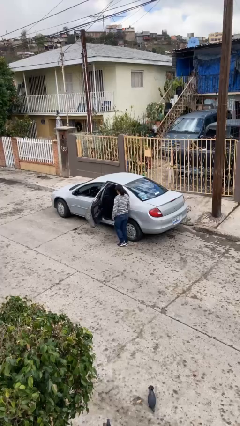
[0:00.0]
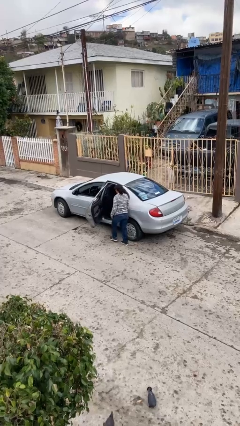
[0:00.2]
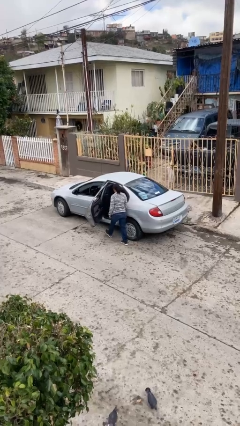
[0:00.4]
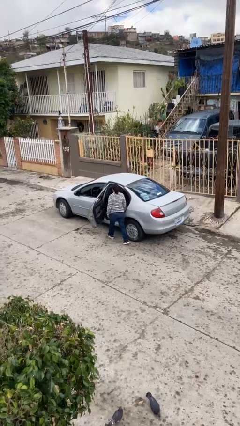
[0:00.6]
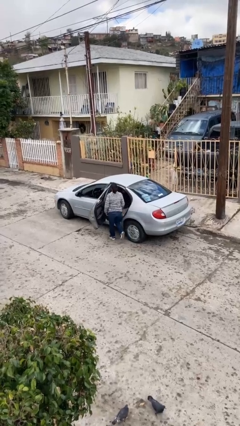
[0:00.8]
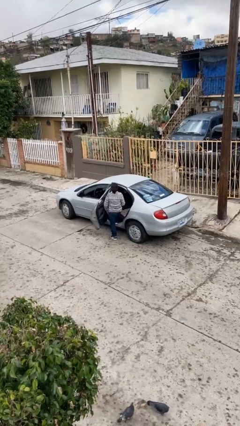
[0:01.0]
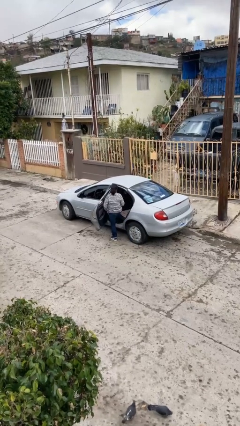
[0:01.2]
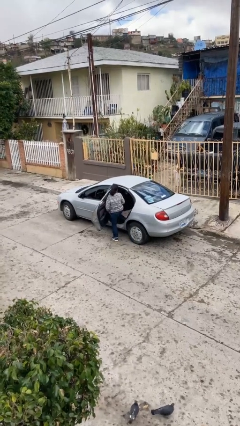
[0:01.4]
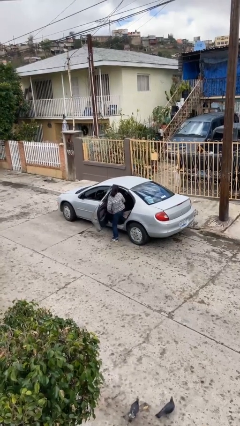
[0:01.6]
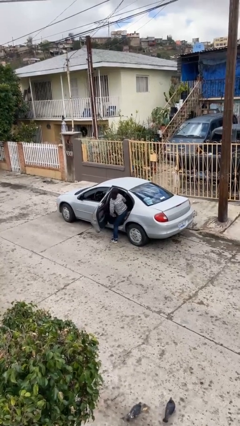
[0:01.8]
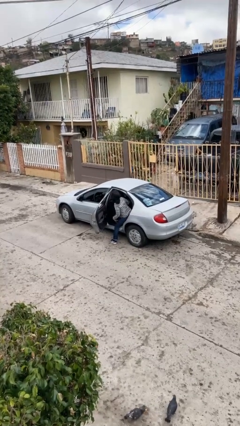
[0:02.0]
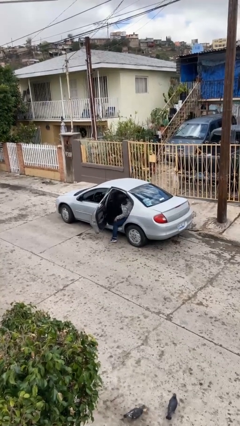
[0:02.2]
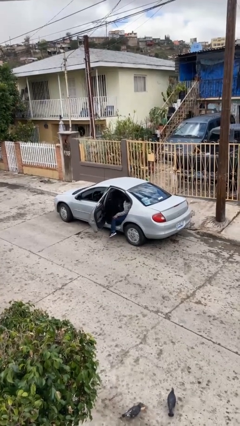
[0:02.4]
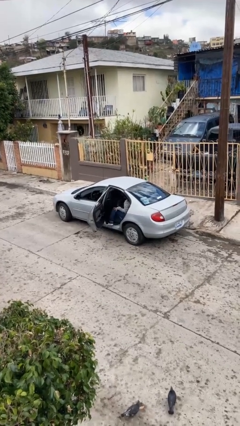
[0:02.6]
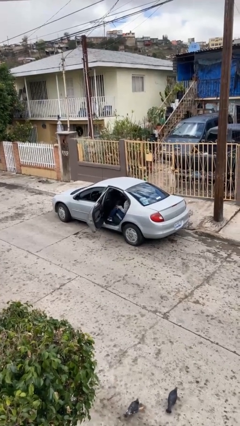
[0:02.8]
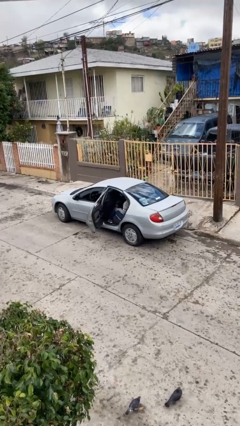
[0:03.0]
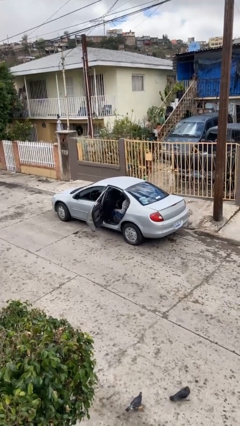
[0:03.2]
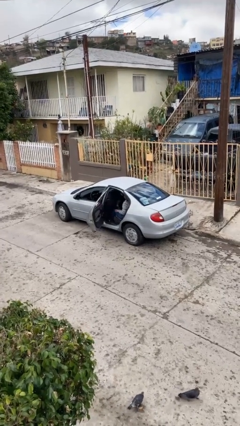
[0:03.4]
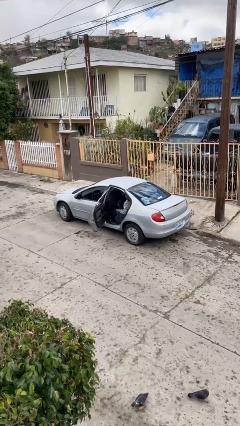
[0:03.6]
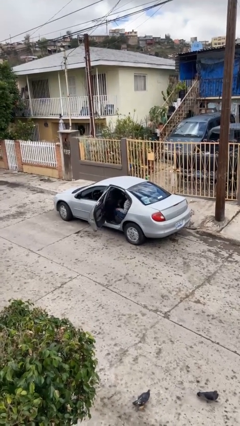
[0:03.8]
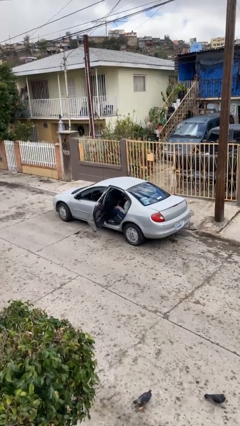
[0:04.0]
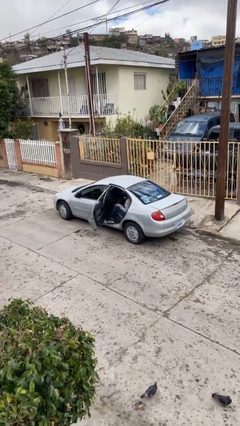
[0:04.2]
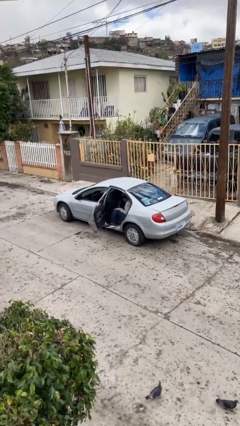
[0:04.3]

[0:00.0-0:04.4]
person enters car

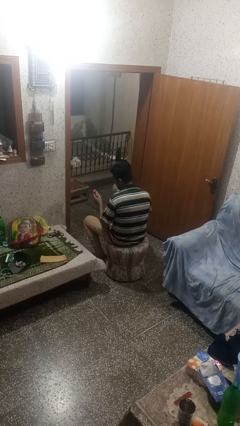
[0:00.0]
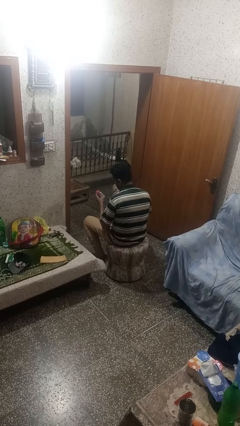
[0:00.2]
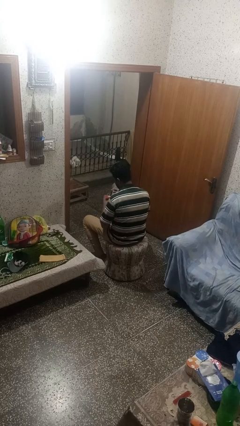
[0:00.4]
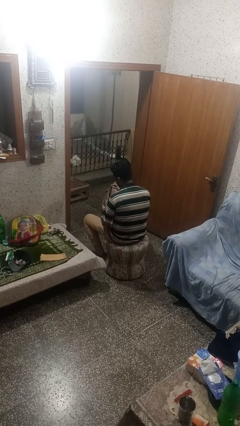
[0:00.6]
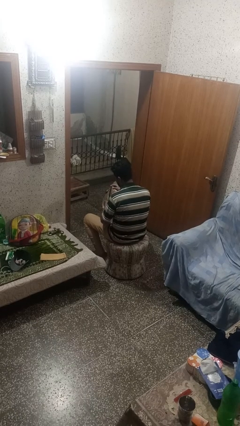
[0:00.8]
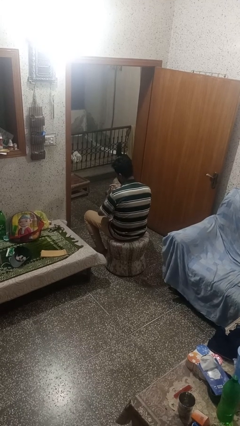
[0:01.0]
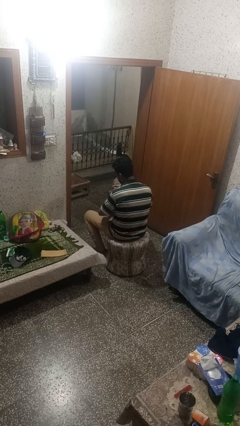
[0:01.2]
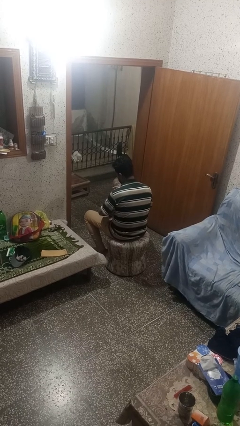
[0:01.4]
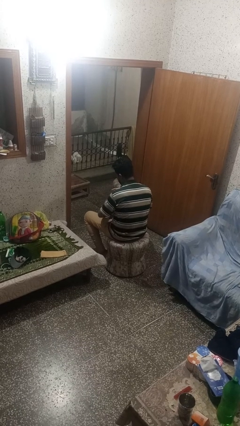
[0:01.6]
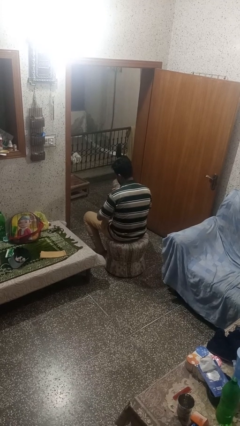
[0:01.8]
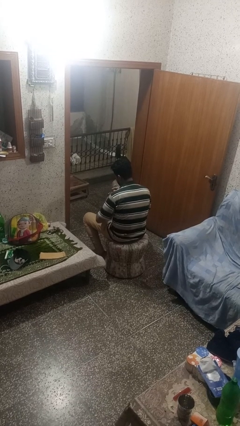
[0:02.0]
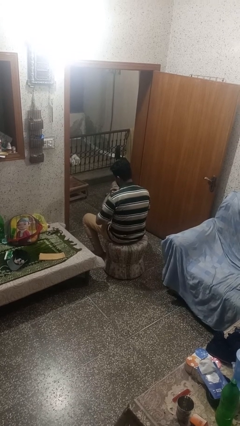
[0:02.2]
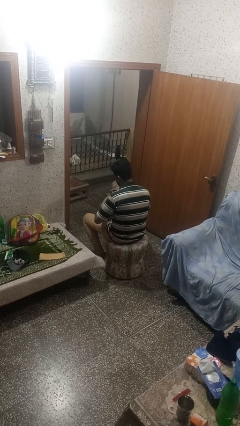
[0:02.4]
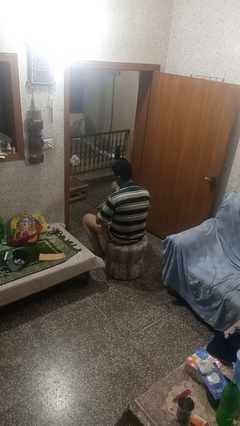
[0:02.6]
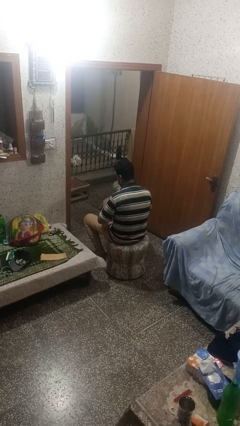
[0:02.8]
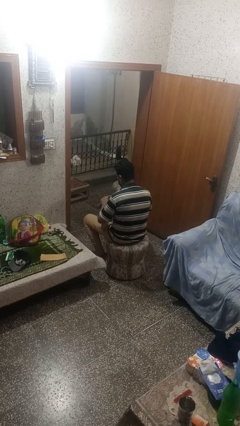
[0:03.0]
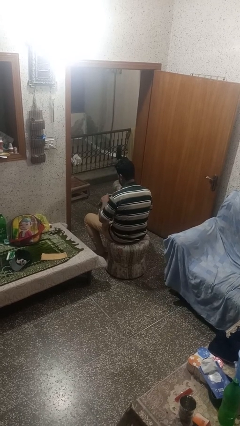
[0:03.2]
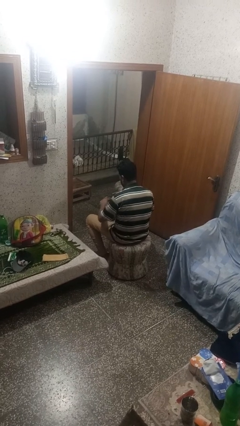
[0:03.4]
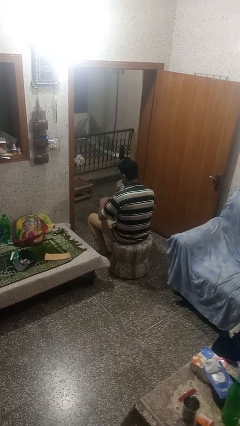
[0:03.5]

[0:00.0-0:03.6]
person puts object into purse

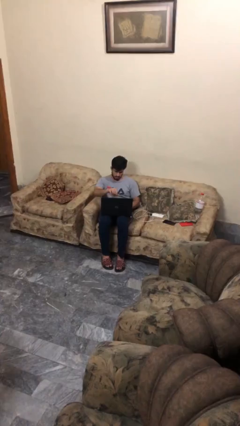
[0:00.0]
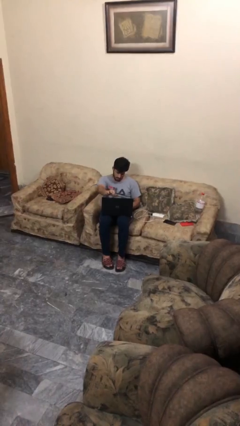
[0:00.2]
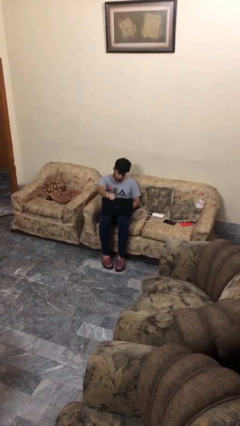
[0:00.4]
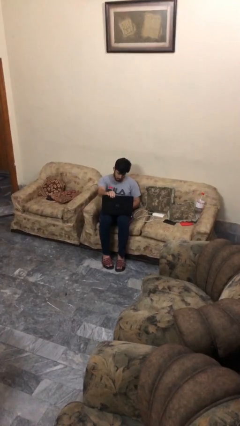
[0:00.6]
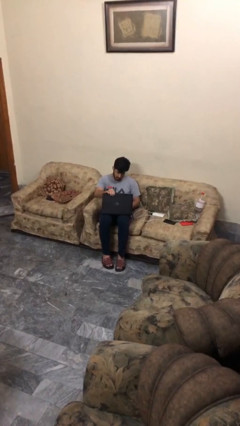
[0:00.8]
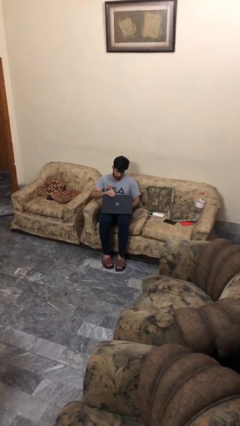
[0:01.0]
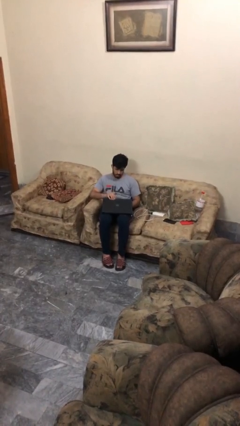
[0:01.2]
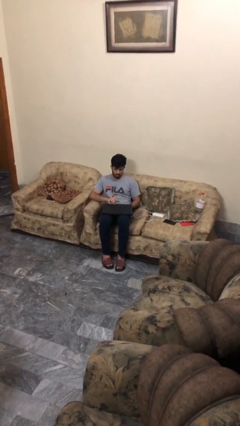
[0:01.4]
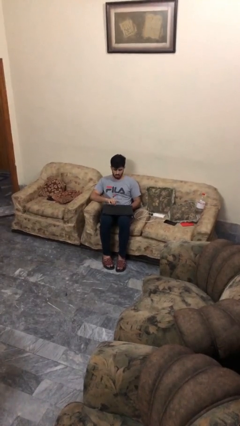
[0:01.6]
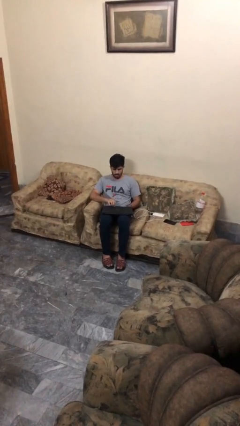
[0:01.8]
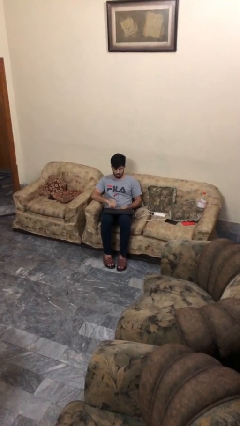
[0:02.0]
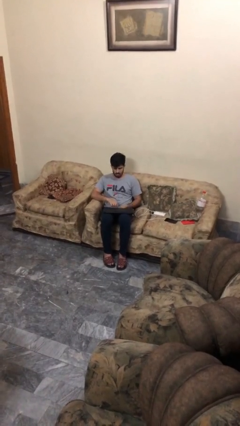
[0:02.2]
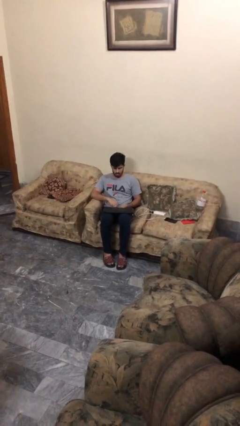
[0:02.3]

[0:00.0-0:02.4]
person closes laptop

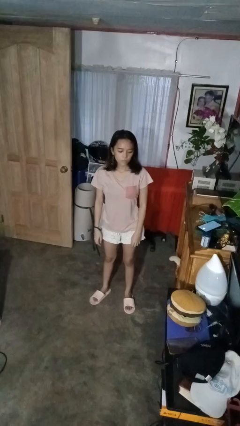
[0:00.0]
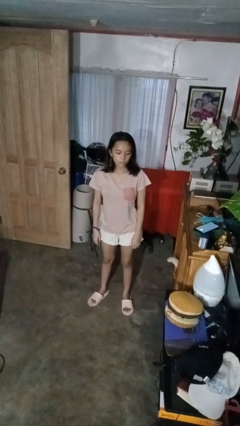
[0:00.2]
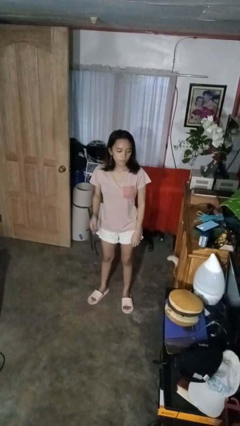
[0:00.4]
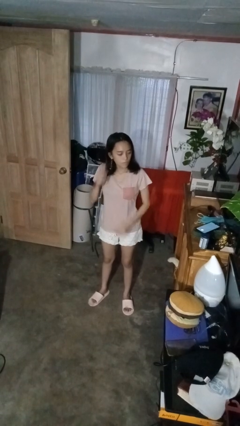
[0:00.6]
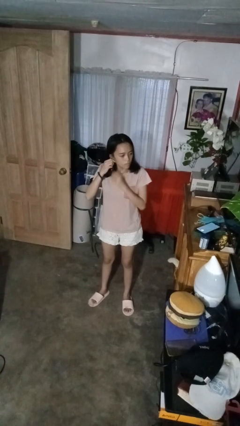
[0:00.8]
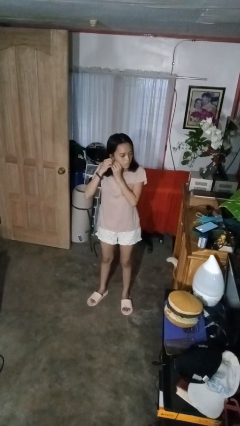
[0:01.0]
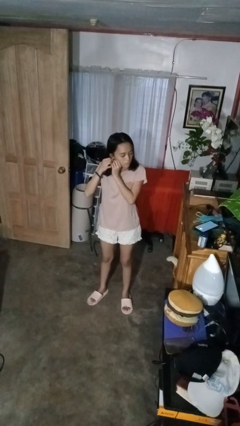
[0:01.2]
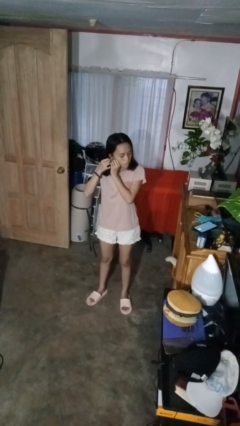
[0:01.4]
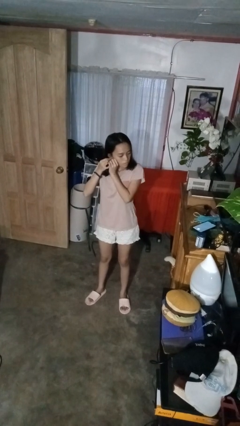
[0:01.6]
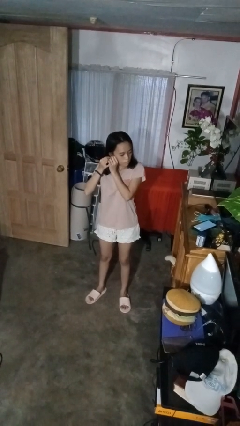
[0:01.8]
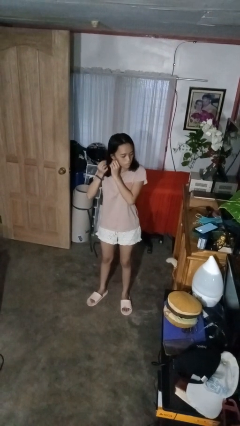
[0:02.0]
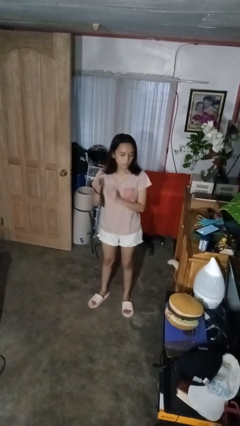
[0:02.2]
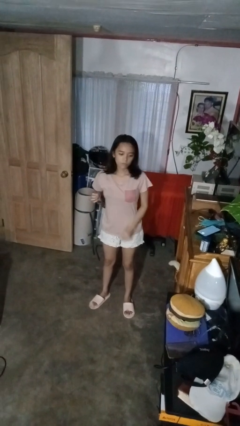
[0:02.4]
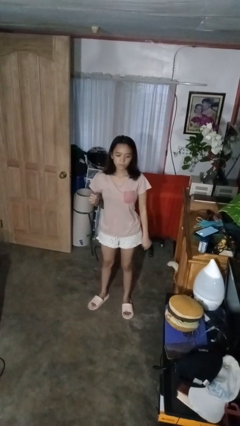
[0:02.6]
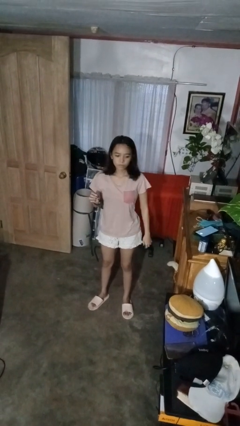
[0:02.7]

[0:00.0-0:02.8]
person takes off earrings

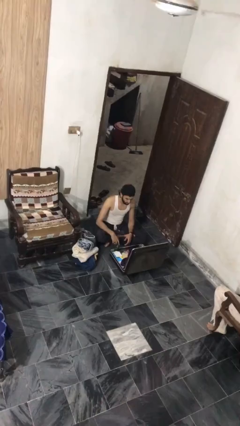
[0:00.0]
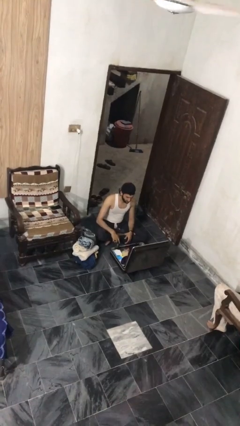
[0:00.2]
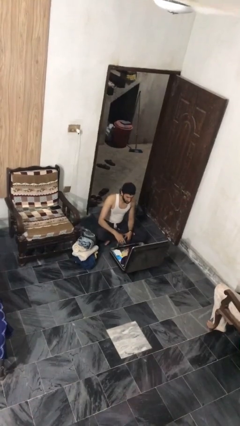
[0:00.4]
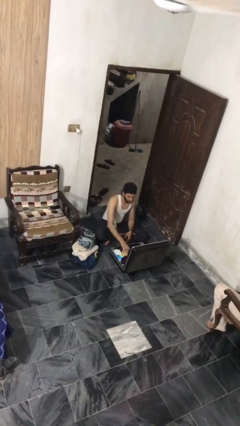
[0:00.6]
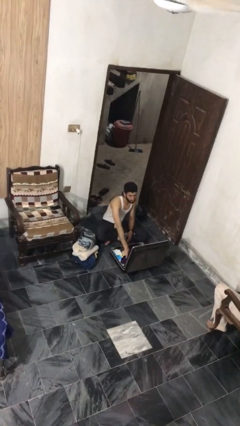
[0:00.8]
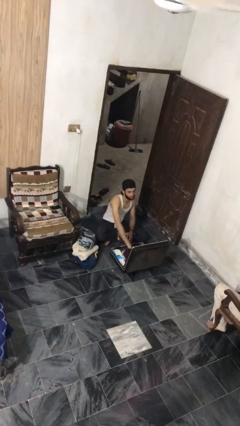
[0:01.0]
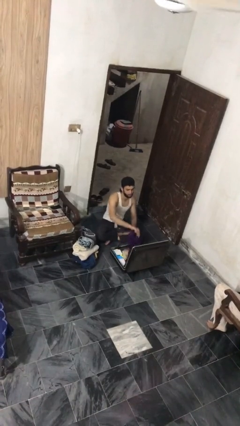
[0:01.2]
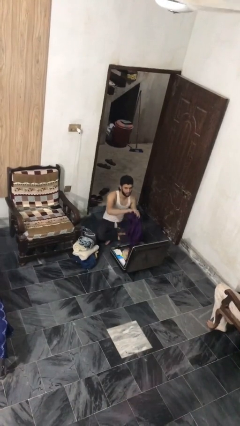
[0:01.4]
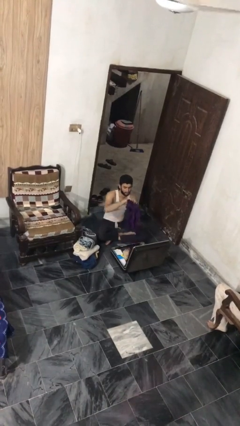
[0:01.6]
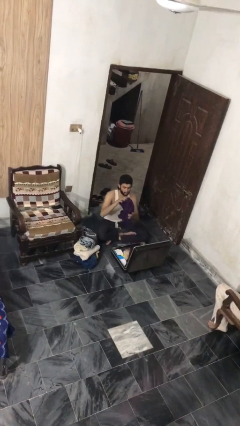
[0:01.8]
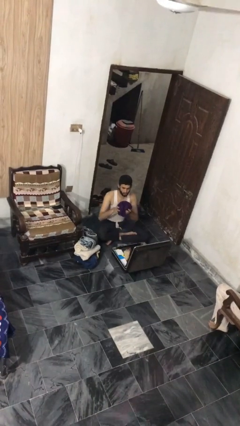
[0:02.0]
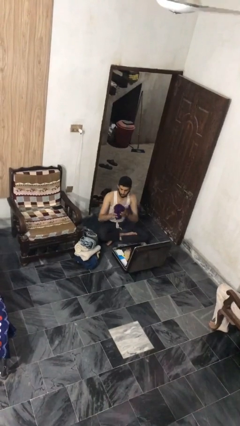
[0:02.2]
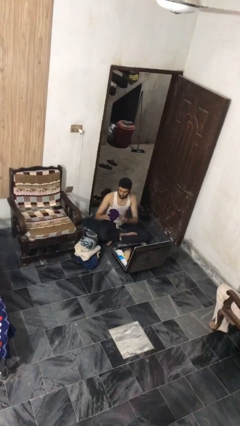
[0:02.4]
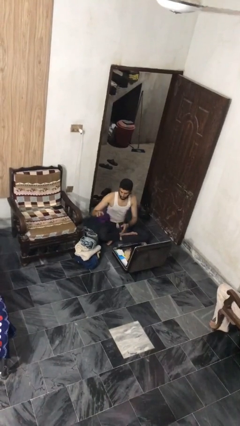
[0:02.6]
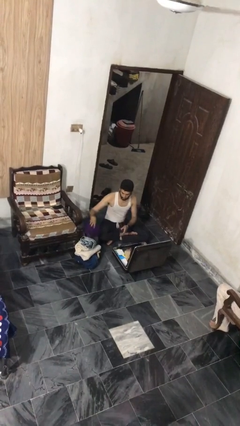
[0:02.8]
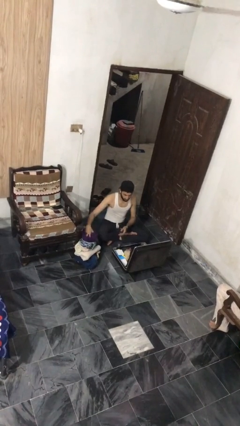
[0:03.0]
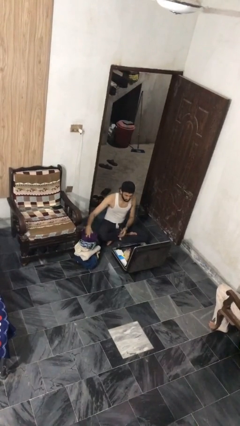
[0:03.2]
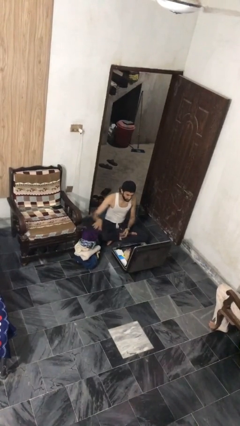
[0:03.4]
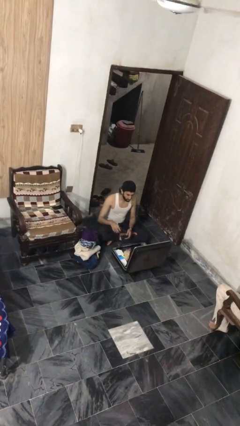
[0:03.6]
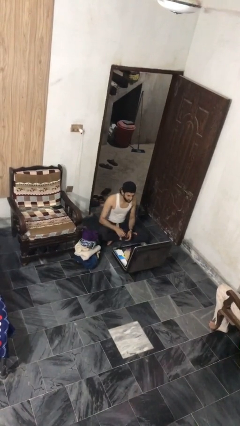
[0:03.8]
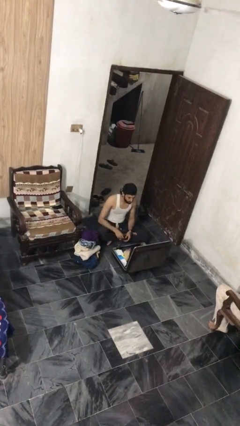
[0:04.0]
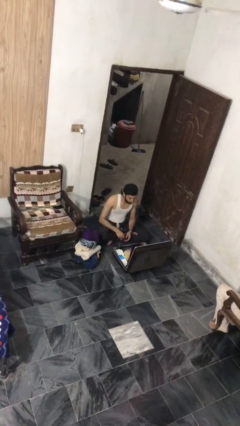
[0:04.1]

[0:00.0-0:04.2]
person unloads clothes from suitcase

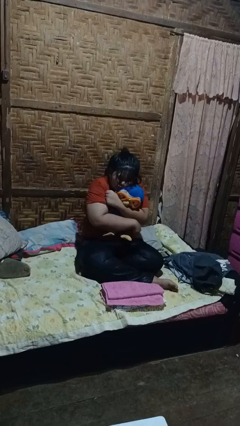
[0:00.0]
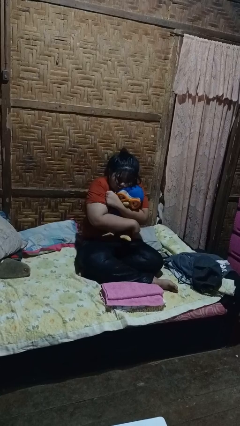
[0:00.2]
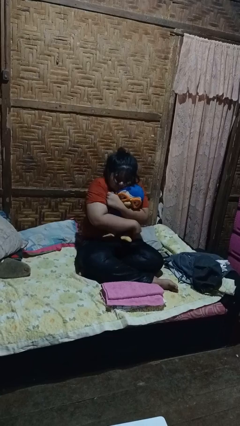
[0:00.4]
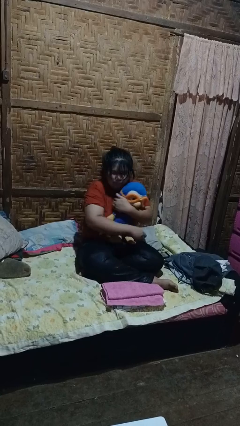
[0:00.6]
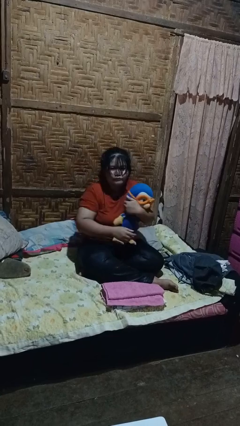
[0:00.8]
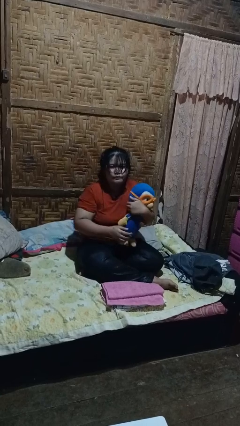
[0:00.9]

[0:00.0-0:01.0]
person hugs stuffed animal
